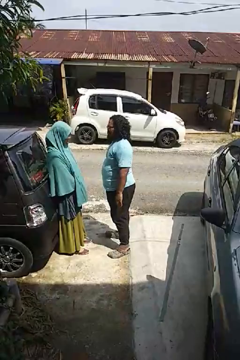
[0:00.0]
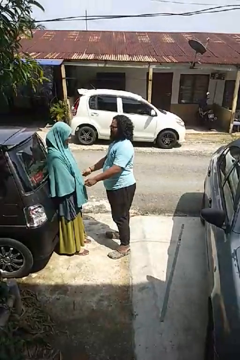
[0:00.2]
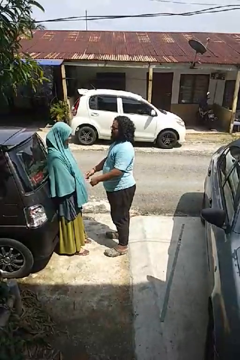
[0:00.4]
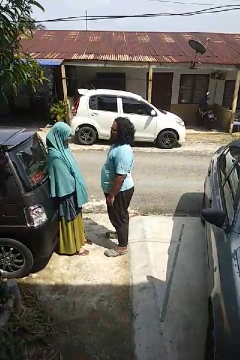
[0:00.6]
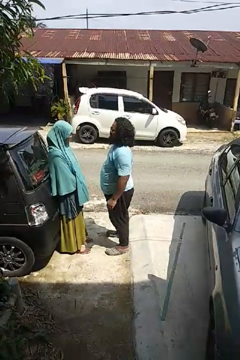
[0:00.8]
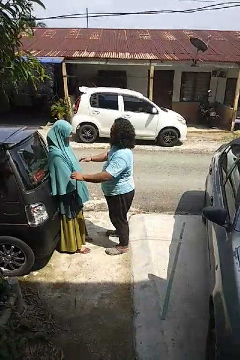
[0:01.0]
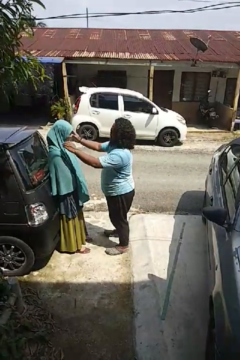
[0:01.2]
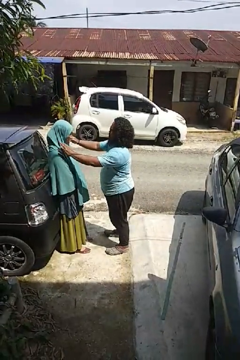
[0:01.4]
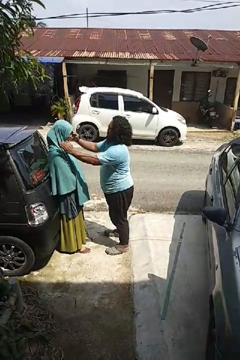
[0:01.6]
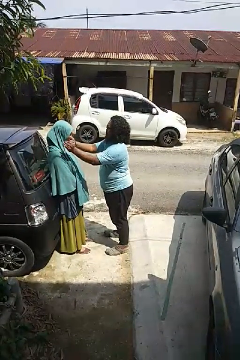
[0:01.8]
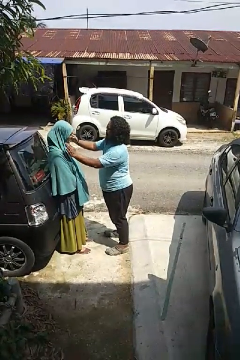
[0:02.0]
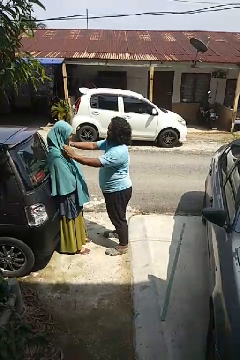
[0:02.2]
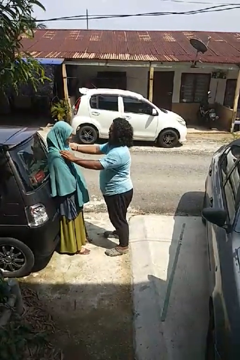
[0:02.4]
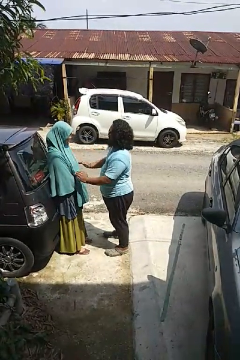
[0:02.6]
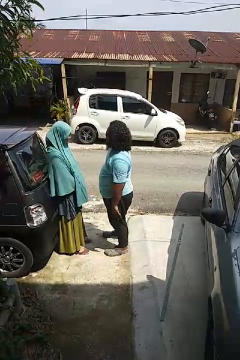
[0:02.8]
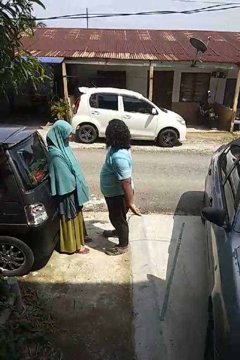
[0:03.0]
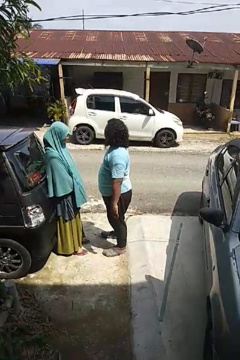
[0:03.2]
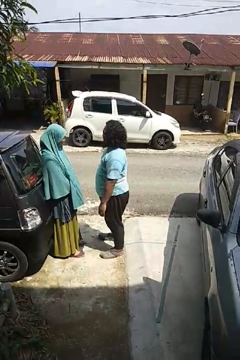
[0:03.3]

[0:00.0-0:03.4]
person pounds shoulders of person

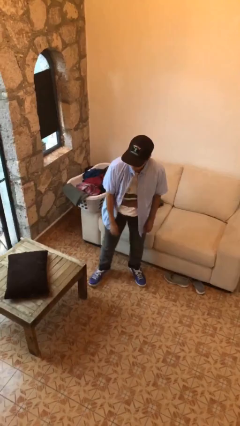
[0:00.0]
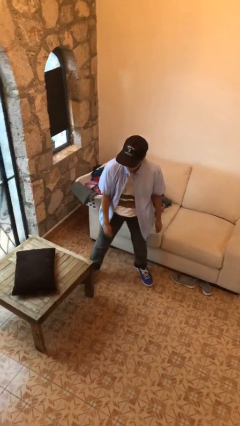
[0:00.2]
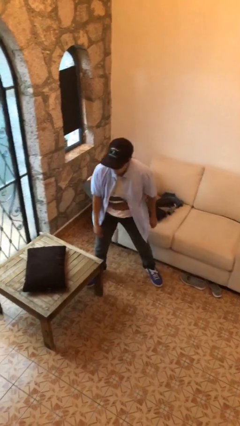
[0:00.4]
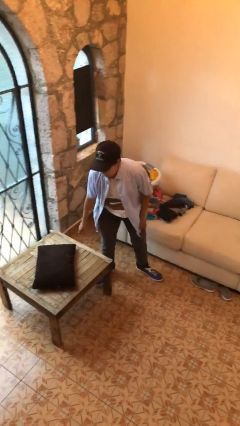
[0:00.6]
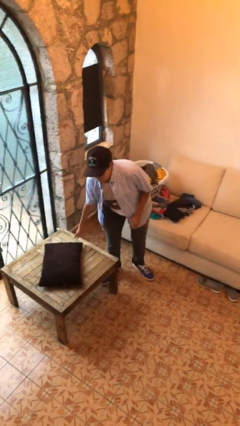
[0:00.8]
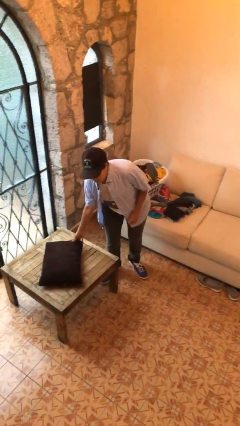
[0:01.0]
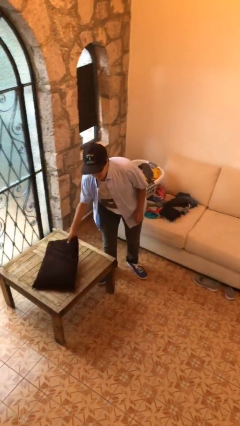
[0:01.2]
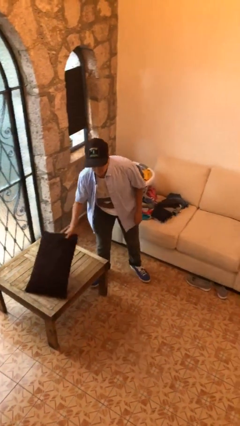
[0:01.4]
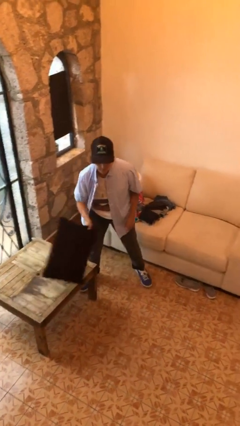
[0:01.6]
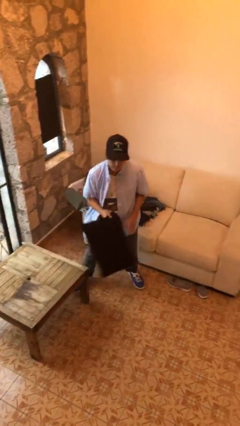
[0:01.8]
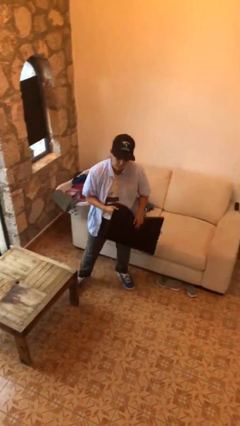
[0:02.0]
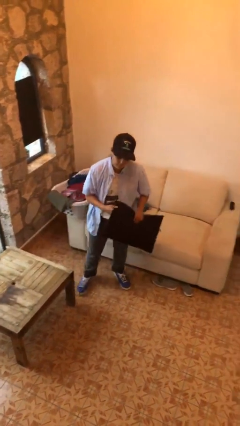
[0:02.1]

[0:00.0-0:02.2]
person picks up object from table

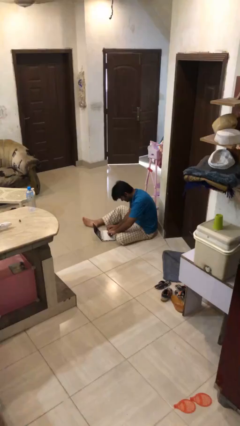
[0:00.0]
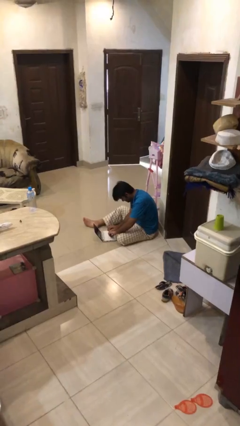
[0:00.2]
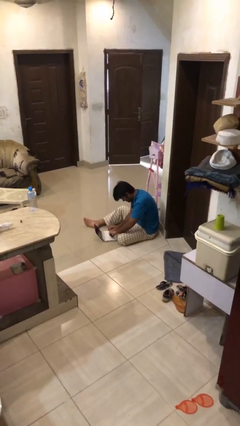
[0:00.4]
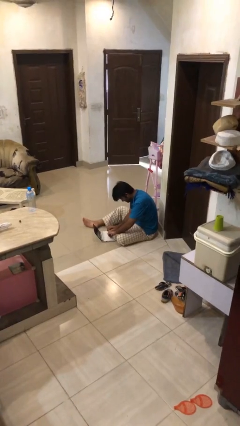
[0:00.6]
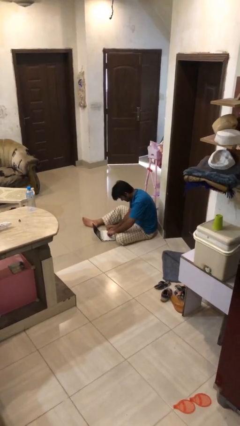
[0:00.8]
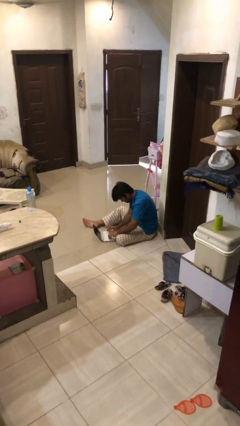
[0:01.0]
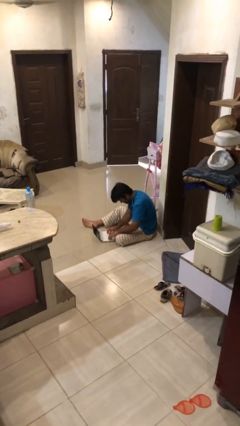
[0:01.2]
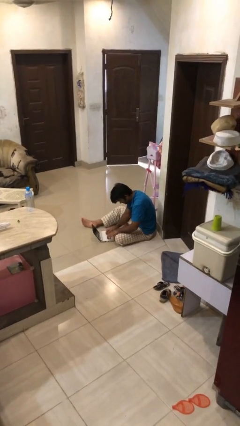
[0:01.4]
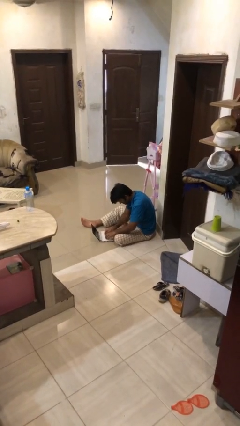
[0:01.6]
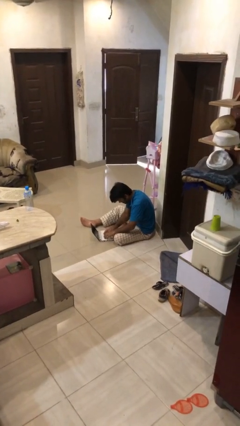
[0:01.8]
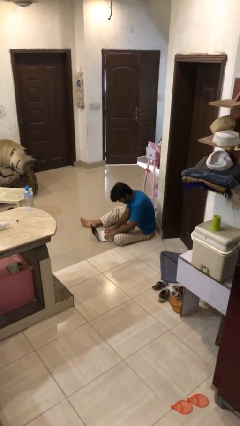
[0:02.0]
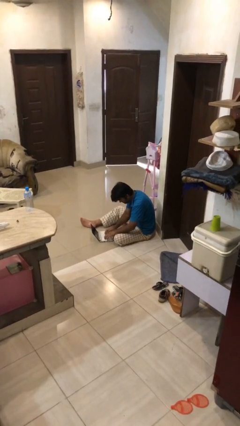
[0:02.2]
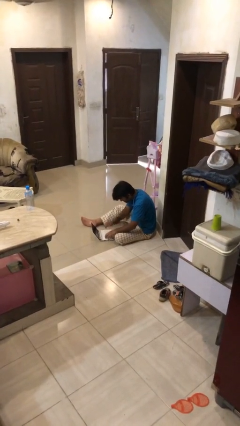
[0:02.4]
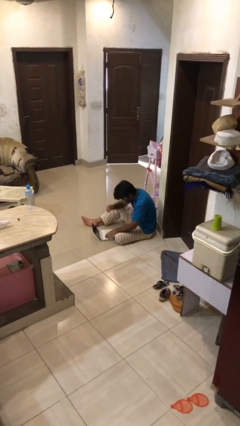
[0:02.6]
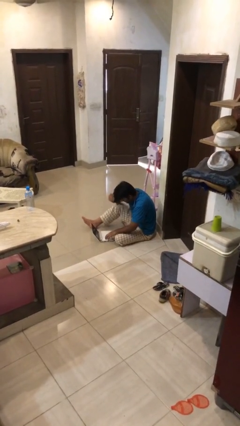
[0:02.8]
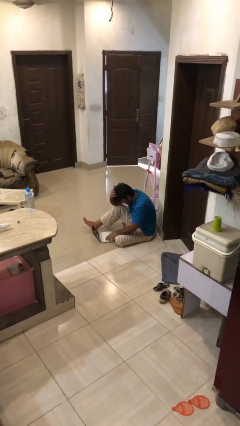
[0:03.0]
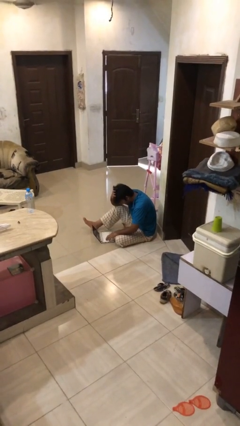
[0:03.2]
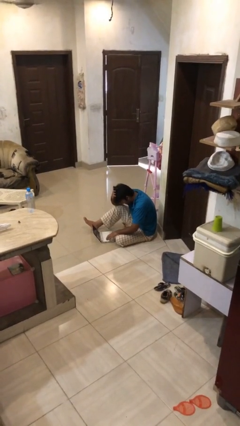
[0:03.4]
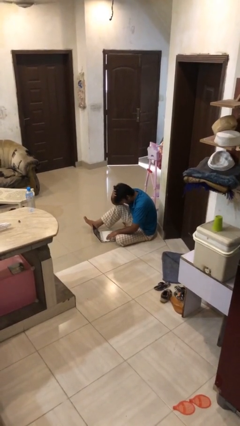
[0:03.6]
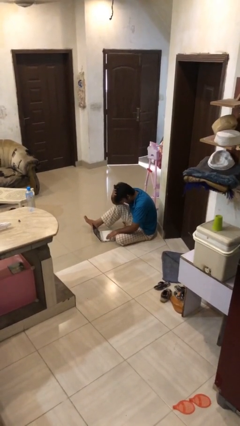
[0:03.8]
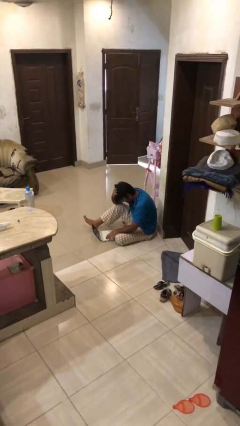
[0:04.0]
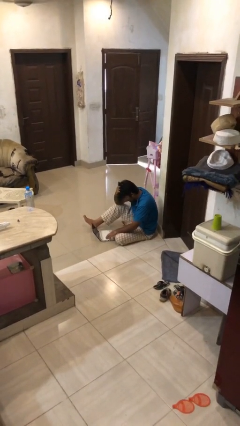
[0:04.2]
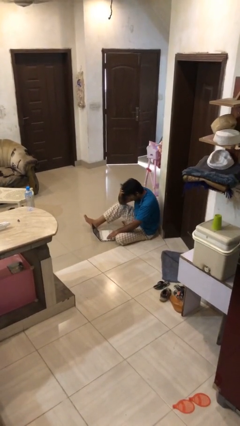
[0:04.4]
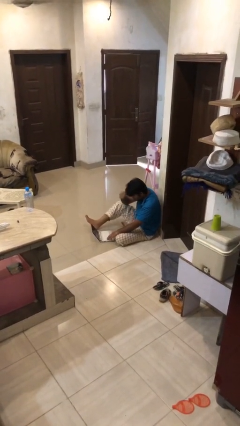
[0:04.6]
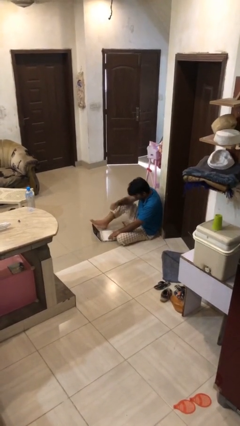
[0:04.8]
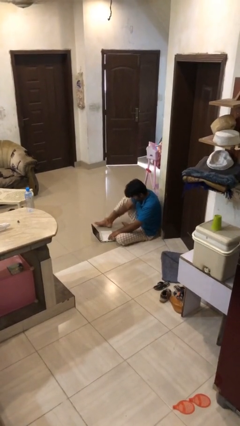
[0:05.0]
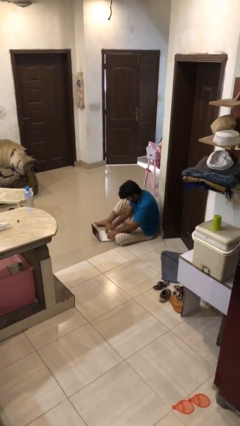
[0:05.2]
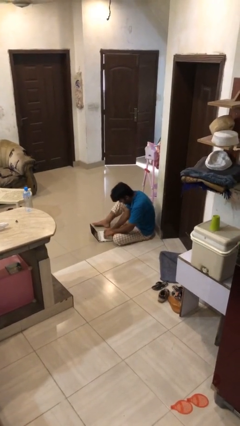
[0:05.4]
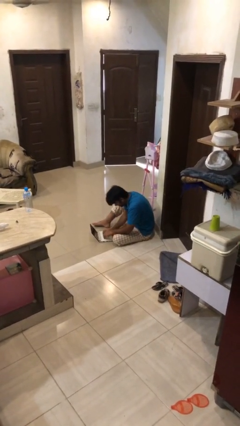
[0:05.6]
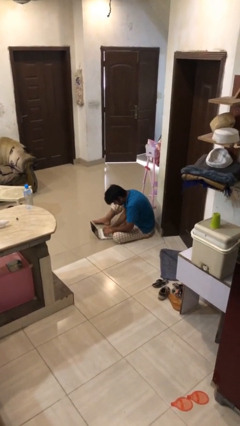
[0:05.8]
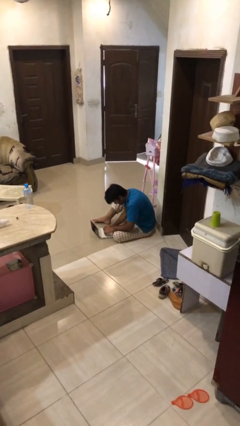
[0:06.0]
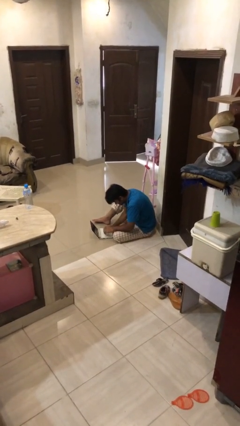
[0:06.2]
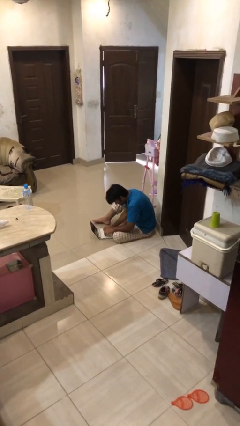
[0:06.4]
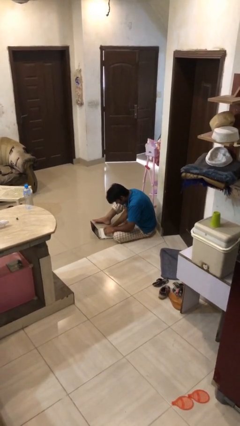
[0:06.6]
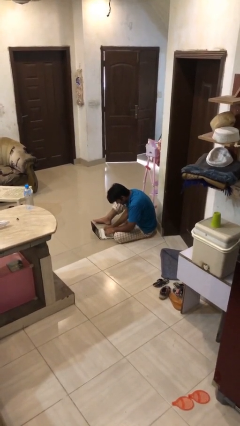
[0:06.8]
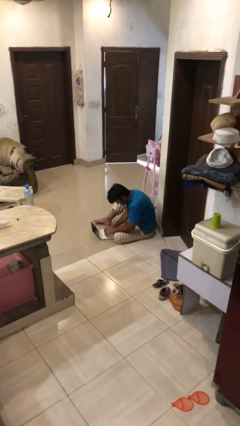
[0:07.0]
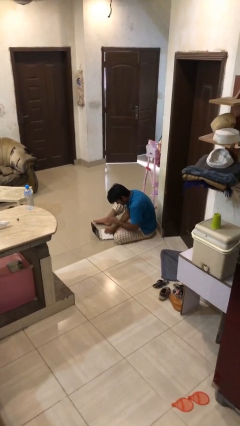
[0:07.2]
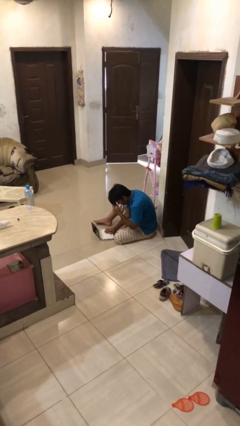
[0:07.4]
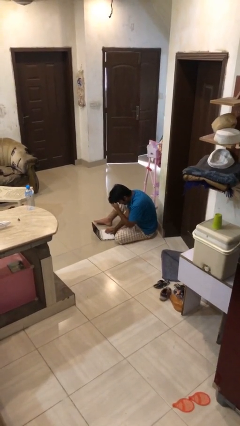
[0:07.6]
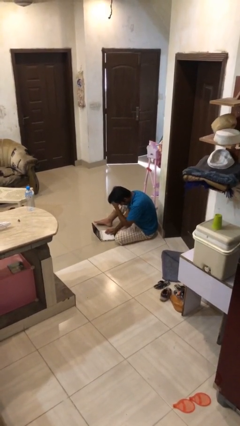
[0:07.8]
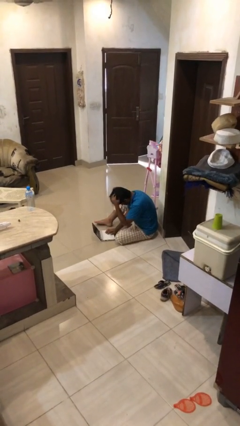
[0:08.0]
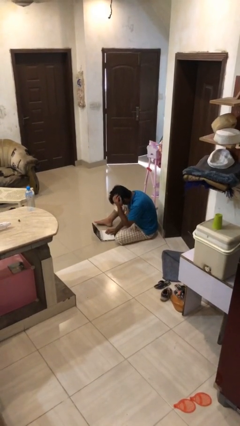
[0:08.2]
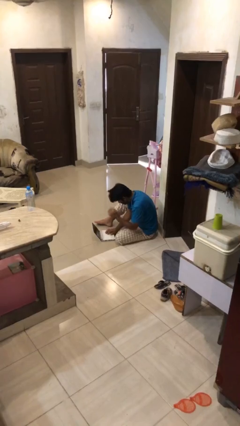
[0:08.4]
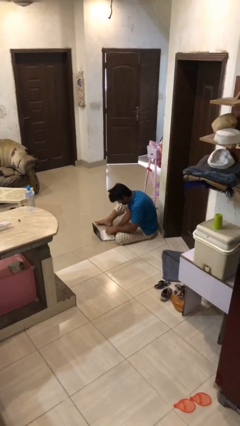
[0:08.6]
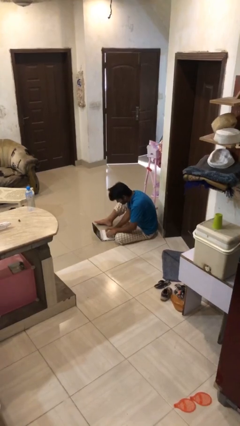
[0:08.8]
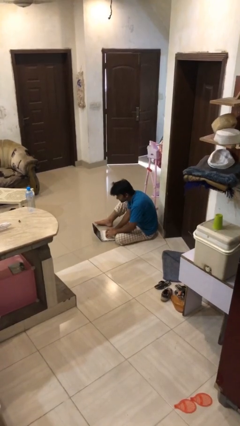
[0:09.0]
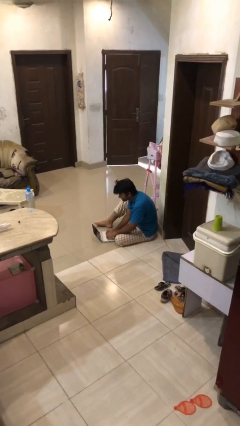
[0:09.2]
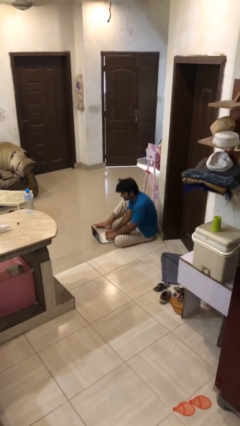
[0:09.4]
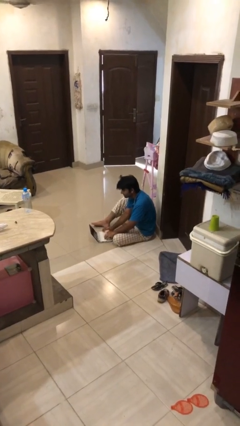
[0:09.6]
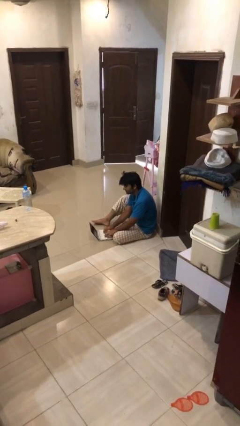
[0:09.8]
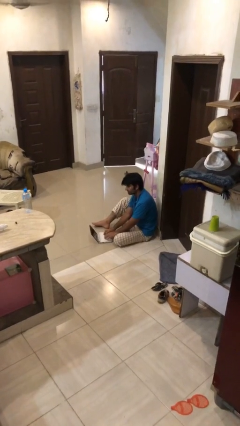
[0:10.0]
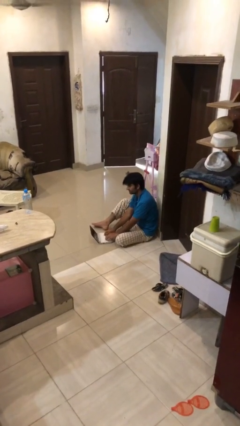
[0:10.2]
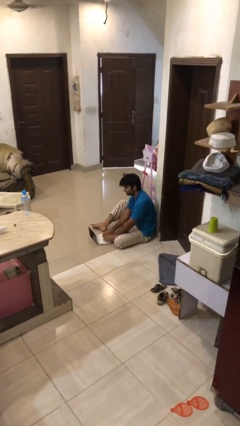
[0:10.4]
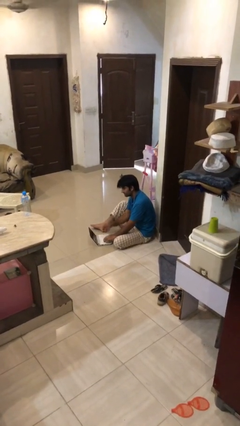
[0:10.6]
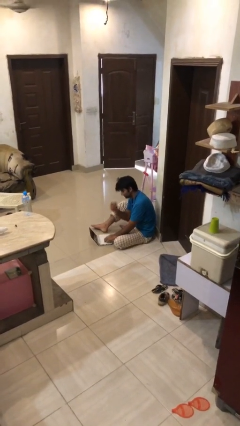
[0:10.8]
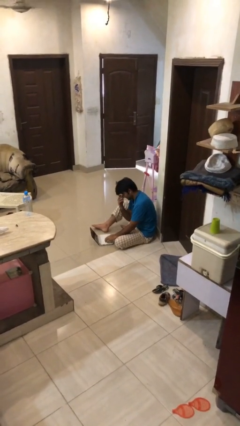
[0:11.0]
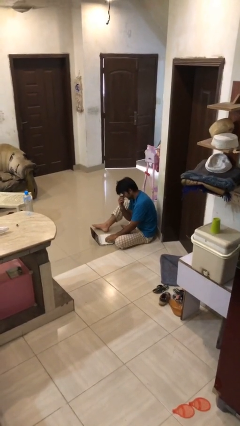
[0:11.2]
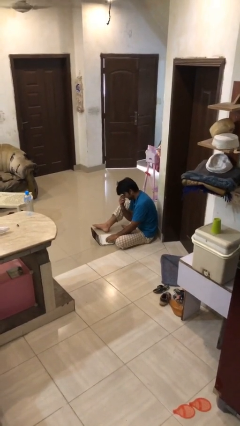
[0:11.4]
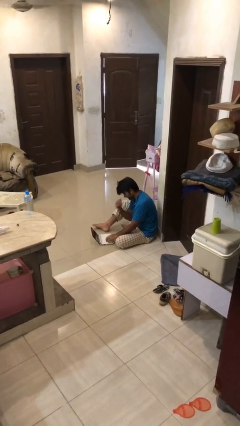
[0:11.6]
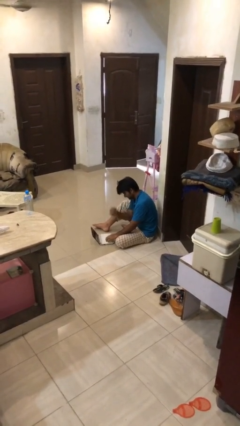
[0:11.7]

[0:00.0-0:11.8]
person interacts with laptop

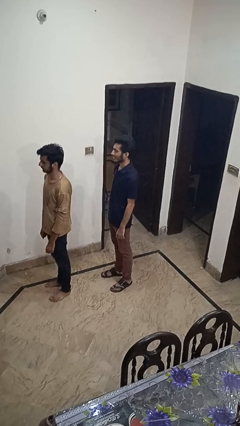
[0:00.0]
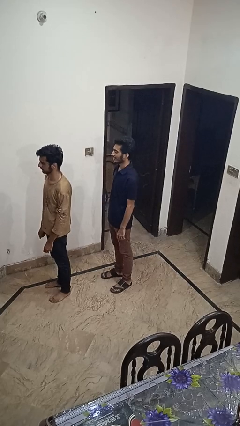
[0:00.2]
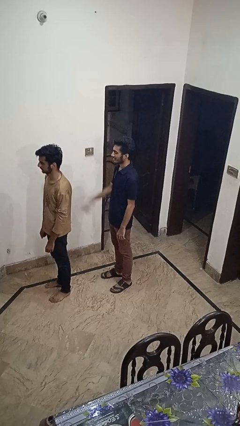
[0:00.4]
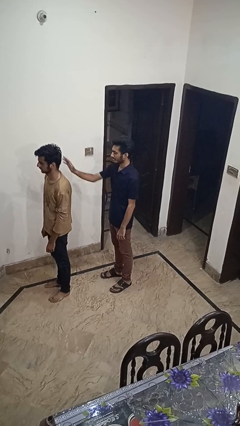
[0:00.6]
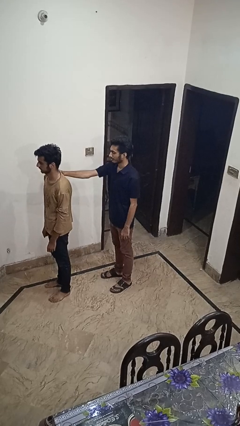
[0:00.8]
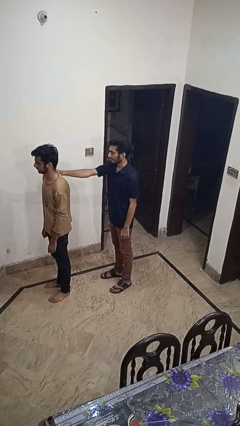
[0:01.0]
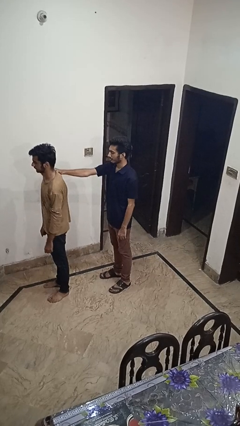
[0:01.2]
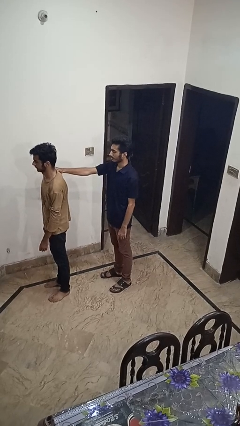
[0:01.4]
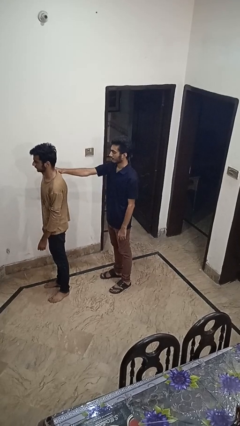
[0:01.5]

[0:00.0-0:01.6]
person grabs person by shoulder
